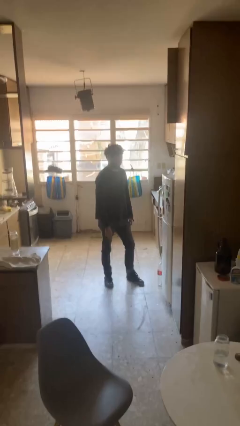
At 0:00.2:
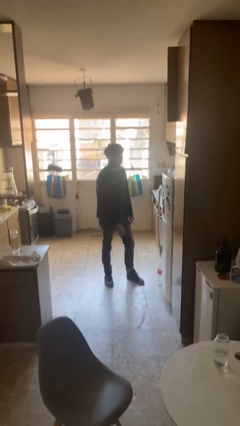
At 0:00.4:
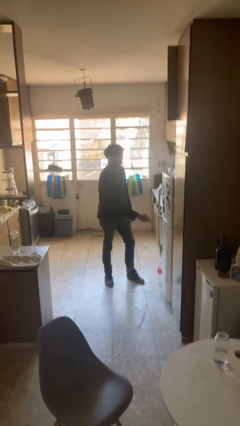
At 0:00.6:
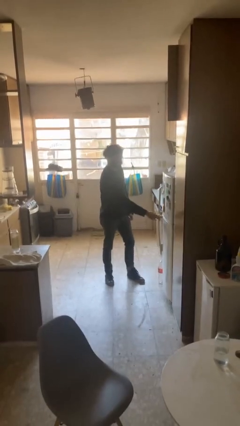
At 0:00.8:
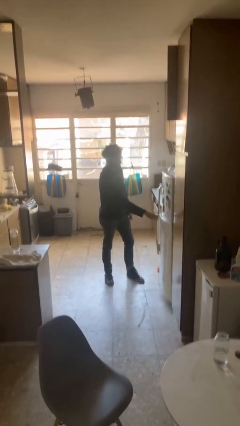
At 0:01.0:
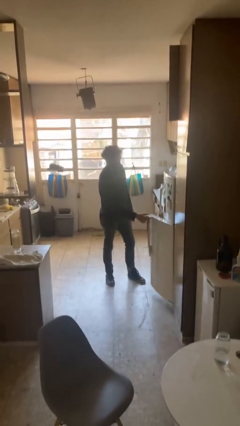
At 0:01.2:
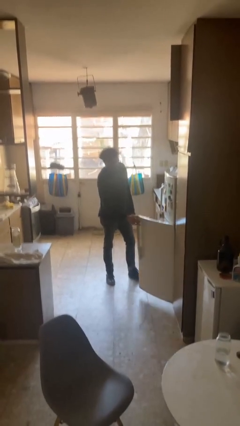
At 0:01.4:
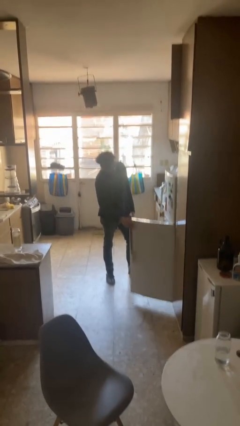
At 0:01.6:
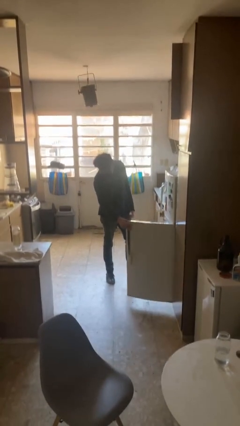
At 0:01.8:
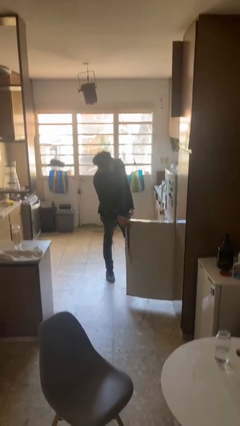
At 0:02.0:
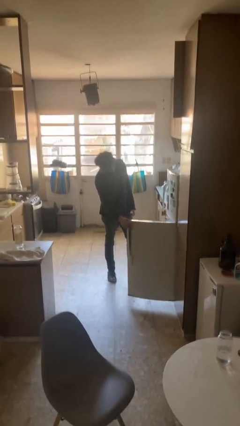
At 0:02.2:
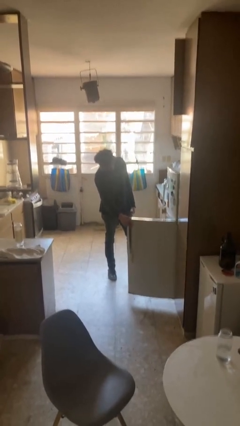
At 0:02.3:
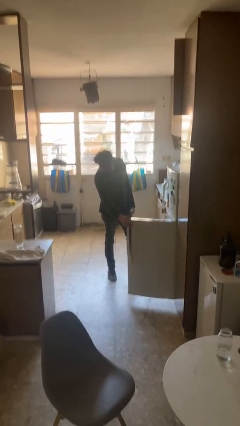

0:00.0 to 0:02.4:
person opens refrigerator

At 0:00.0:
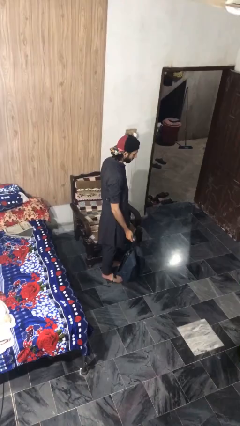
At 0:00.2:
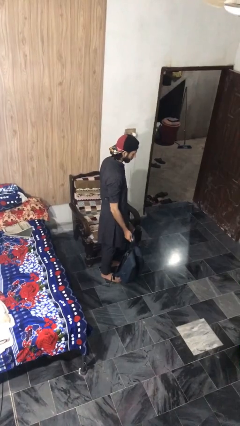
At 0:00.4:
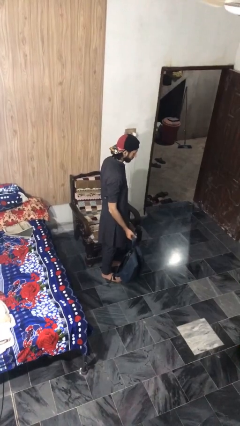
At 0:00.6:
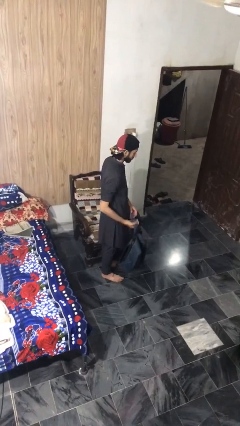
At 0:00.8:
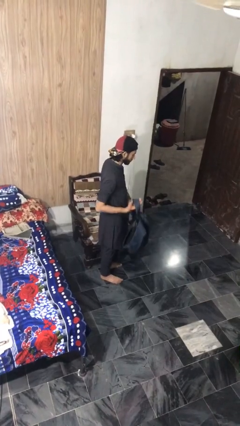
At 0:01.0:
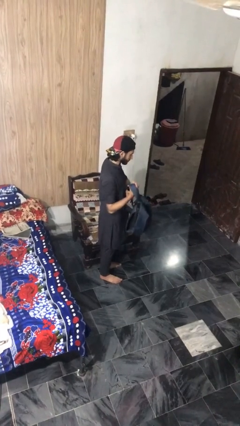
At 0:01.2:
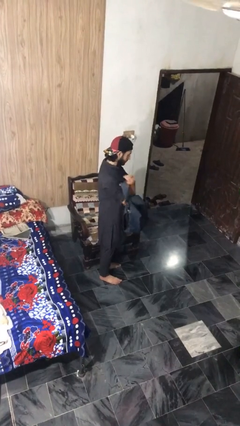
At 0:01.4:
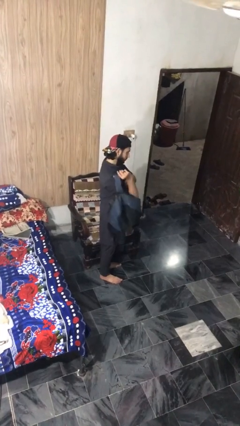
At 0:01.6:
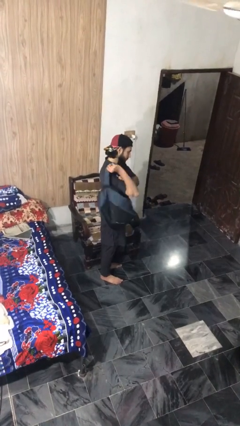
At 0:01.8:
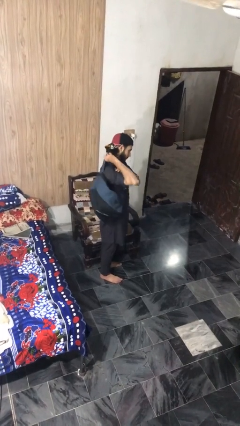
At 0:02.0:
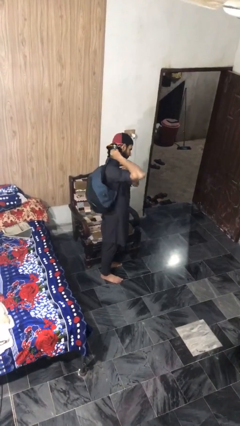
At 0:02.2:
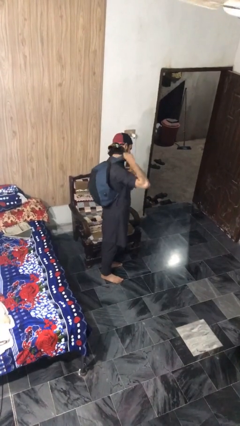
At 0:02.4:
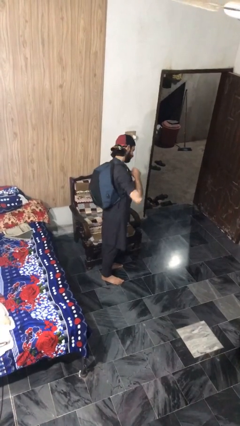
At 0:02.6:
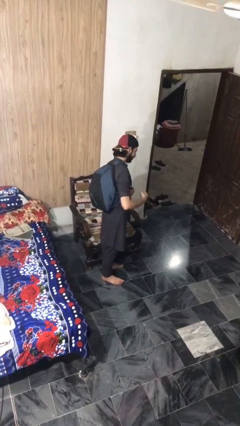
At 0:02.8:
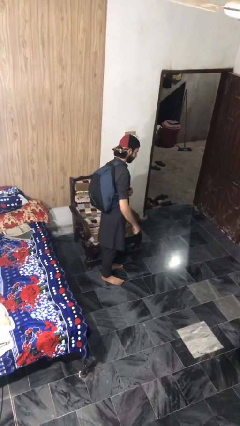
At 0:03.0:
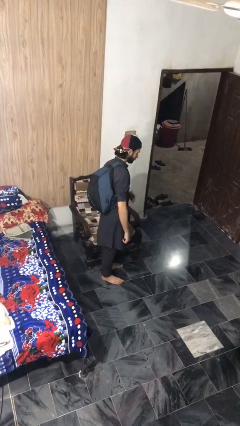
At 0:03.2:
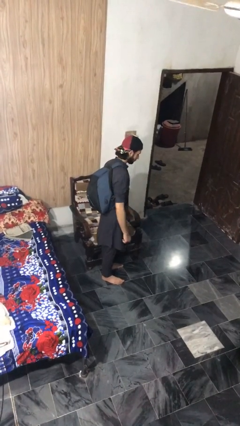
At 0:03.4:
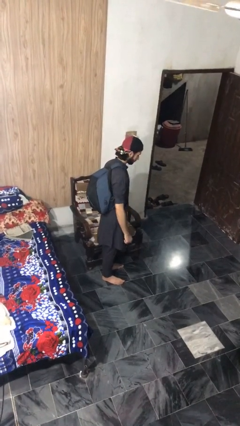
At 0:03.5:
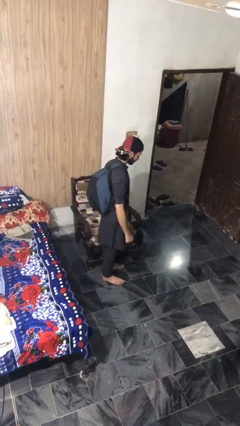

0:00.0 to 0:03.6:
person puts on backpack

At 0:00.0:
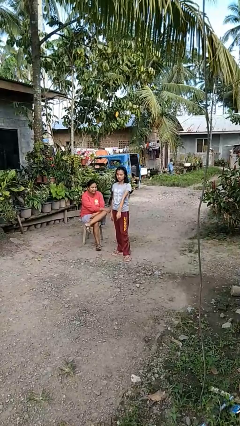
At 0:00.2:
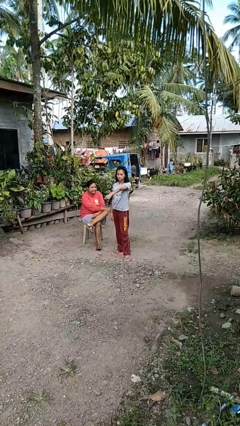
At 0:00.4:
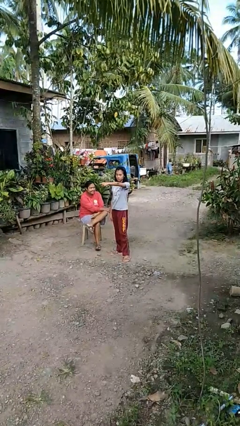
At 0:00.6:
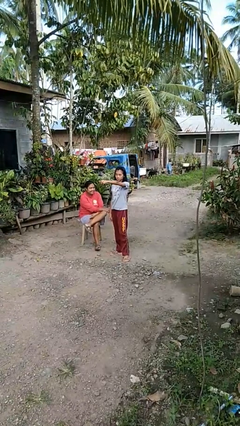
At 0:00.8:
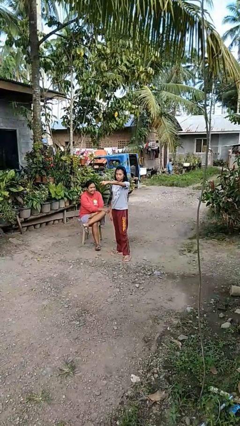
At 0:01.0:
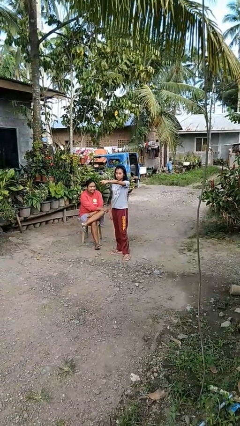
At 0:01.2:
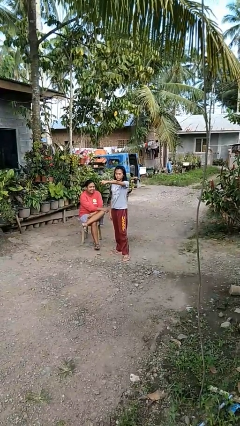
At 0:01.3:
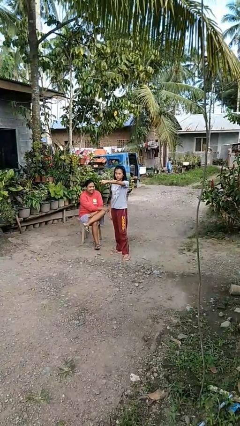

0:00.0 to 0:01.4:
person points at person

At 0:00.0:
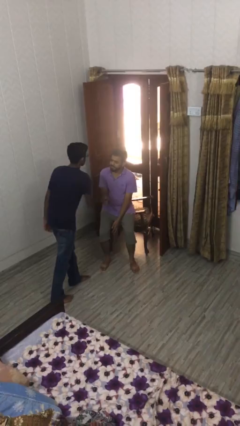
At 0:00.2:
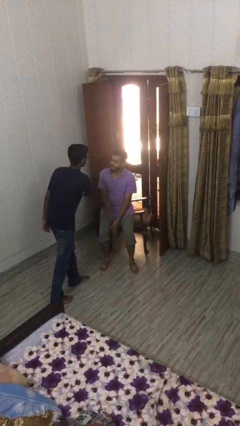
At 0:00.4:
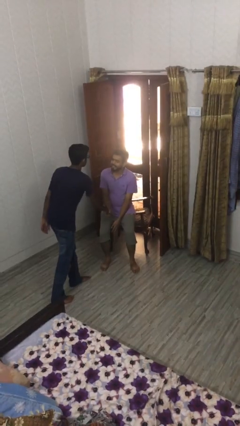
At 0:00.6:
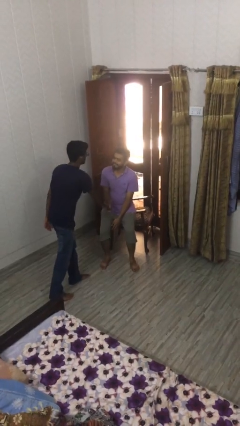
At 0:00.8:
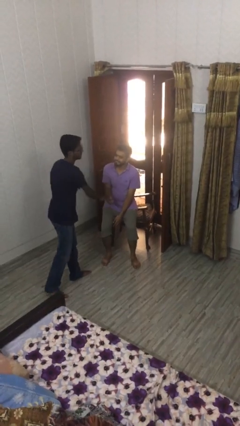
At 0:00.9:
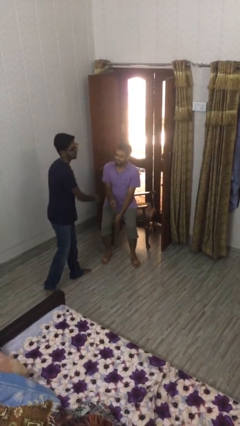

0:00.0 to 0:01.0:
person shakes hand

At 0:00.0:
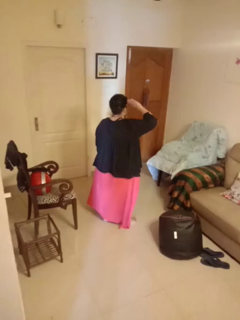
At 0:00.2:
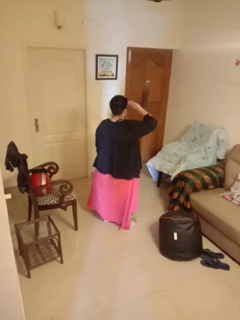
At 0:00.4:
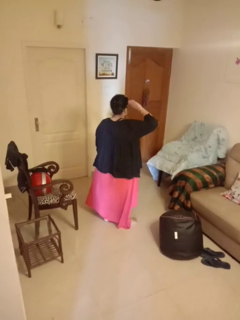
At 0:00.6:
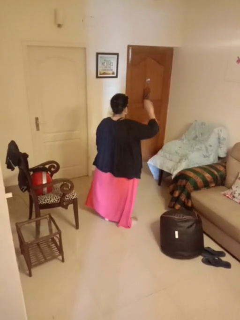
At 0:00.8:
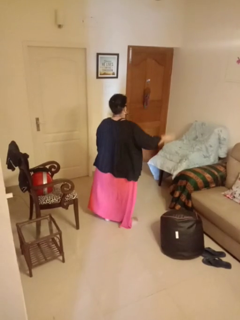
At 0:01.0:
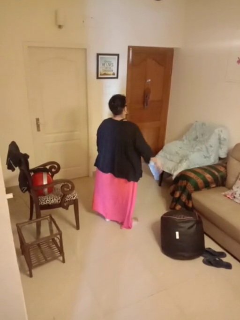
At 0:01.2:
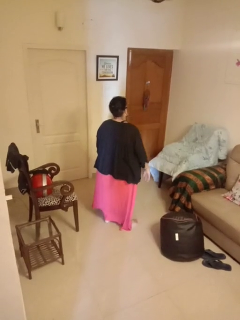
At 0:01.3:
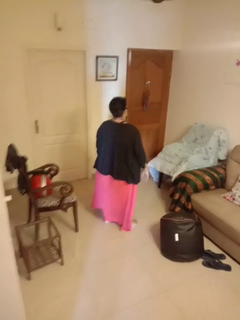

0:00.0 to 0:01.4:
person salutes

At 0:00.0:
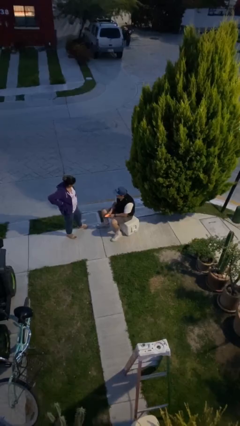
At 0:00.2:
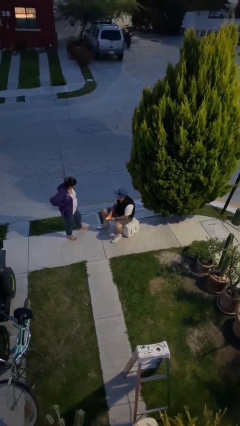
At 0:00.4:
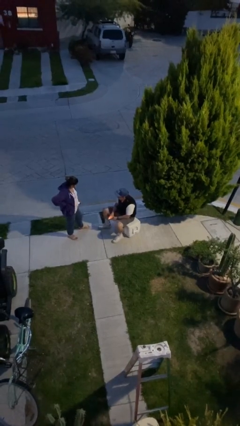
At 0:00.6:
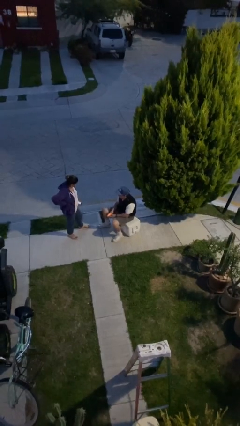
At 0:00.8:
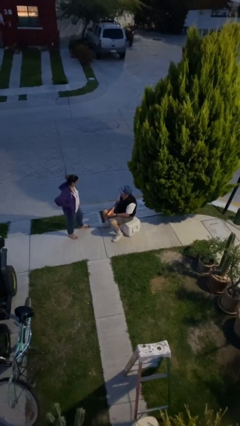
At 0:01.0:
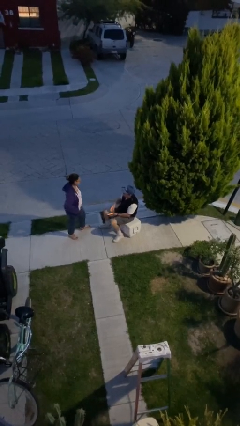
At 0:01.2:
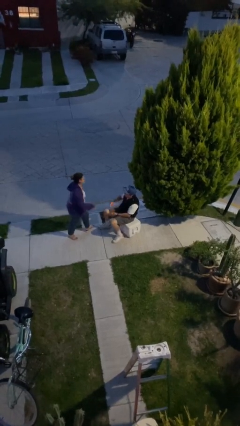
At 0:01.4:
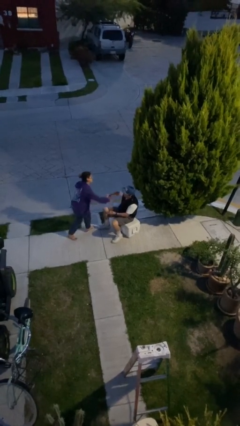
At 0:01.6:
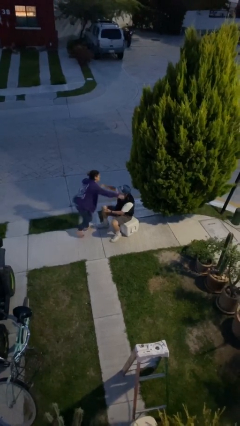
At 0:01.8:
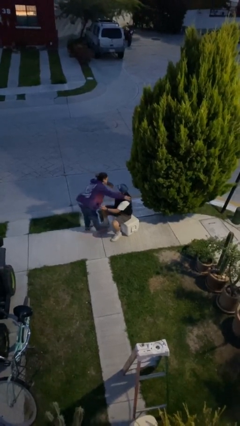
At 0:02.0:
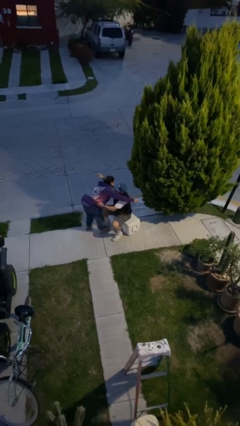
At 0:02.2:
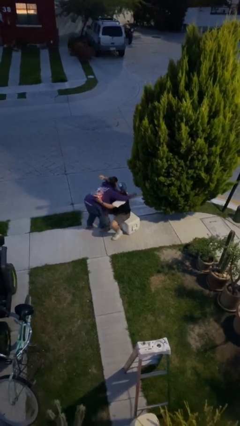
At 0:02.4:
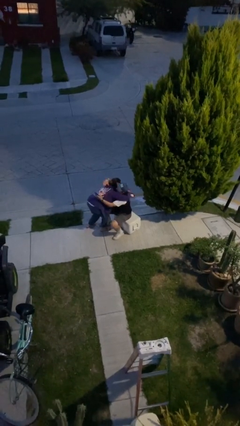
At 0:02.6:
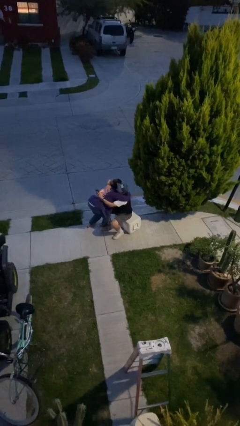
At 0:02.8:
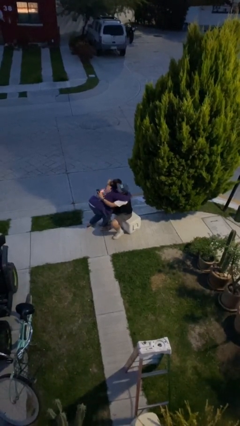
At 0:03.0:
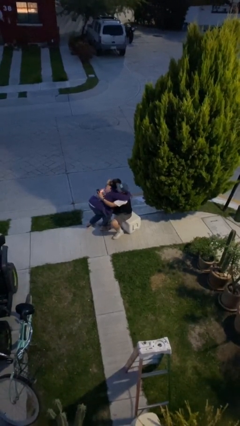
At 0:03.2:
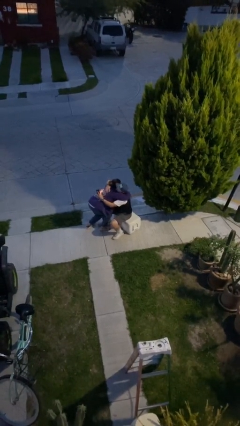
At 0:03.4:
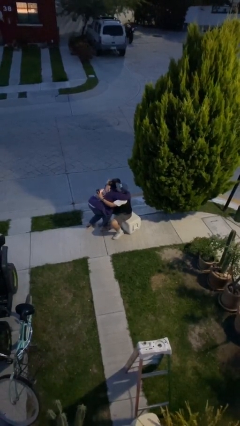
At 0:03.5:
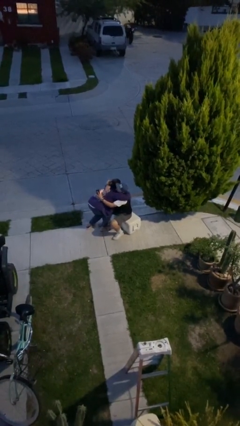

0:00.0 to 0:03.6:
person embraces person

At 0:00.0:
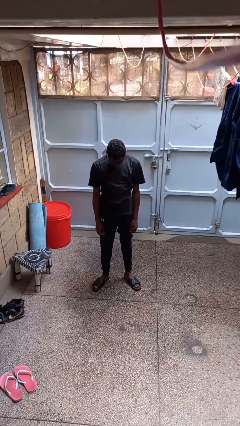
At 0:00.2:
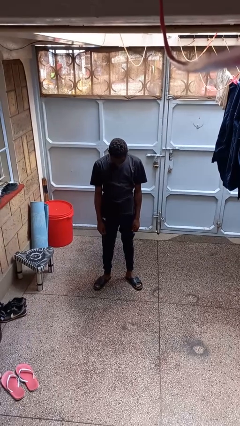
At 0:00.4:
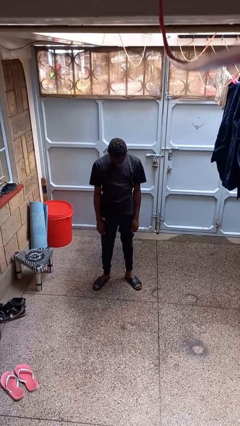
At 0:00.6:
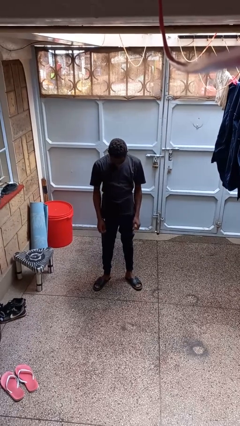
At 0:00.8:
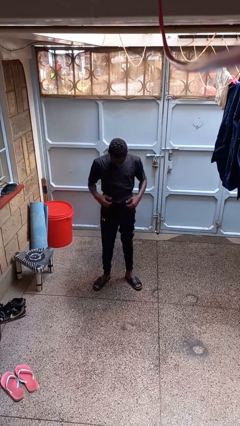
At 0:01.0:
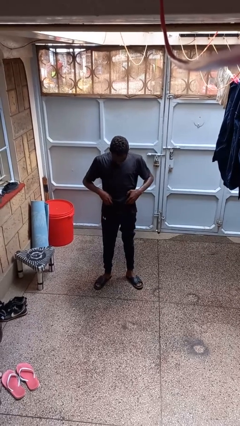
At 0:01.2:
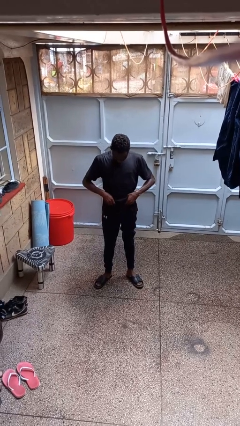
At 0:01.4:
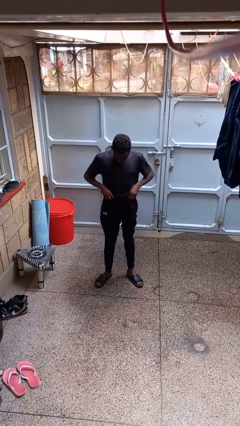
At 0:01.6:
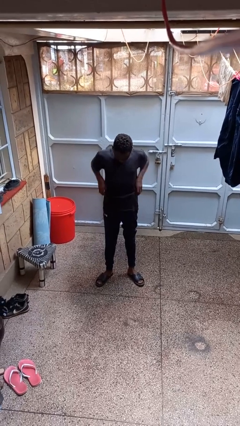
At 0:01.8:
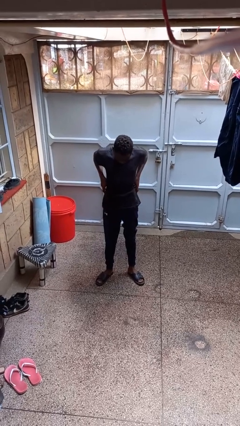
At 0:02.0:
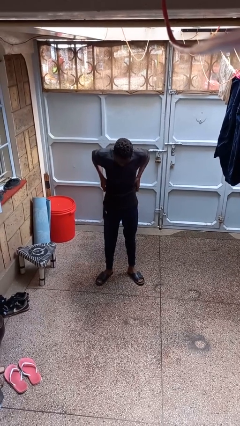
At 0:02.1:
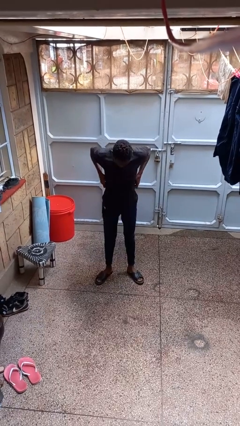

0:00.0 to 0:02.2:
person hikes up pants

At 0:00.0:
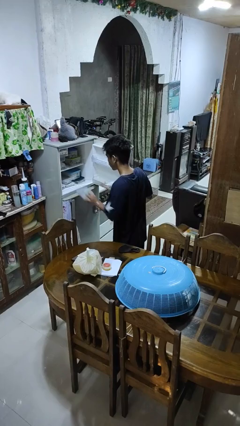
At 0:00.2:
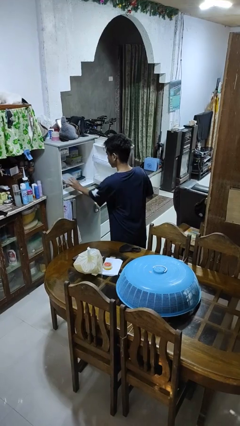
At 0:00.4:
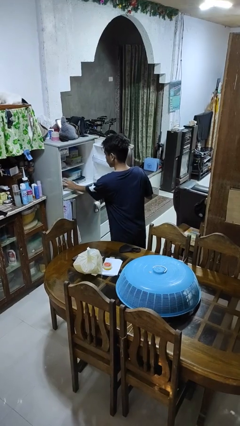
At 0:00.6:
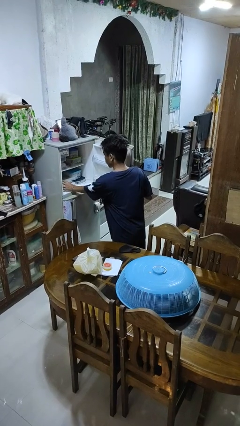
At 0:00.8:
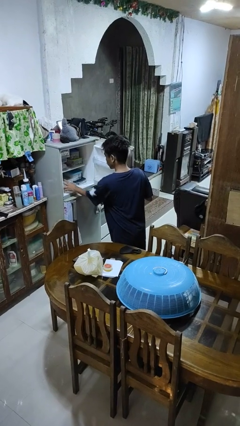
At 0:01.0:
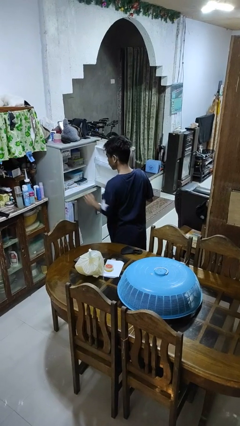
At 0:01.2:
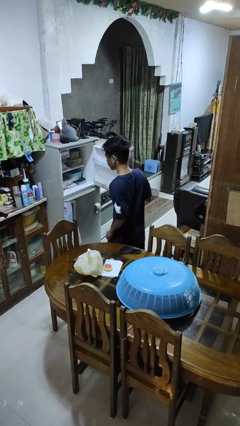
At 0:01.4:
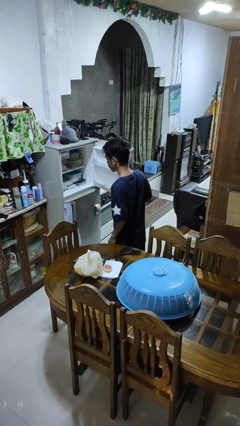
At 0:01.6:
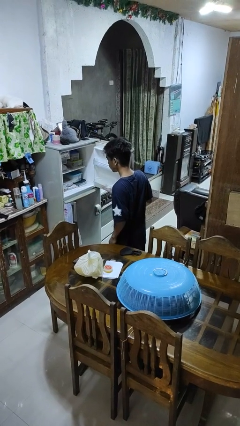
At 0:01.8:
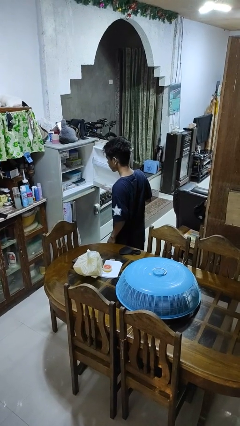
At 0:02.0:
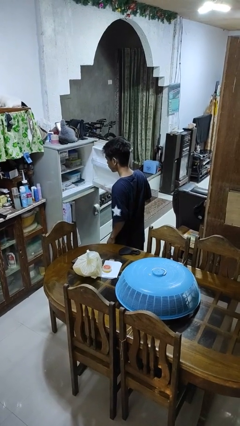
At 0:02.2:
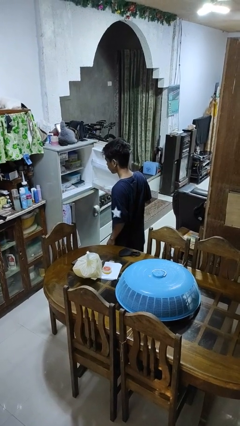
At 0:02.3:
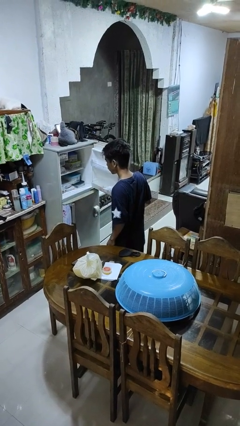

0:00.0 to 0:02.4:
person puts object into refrigerator
